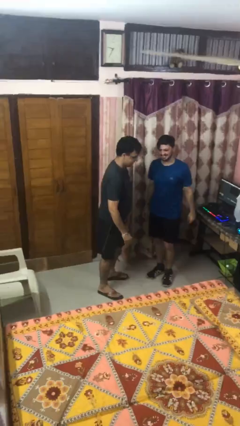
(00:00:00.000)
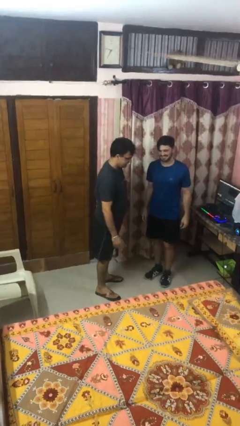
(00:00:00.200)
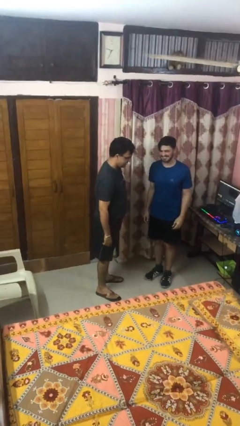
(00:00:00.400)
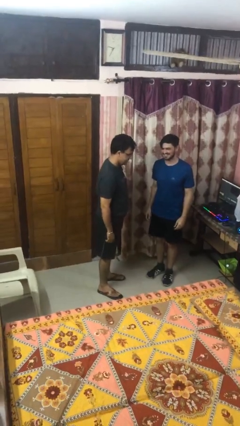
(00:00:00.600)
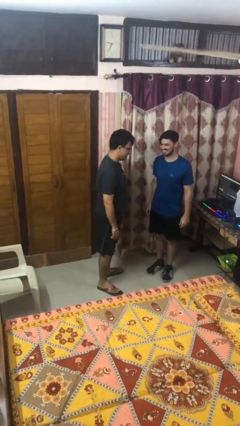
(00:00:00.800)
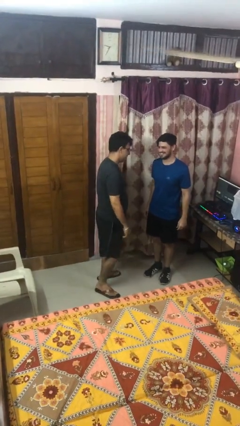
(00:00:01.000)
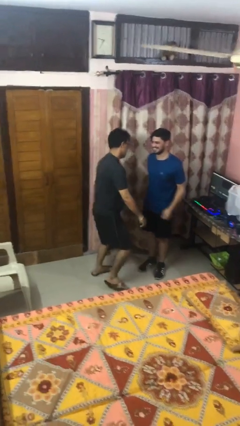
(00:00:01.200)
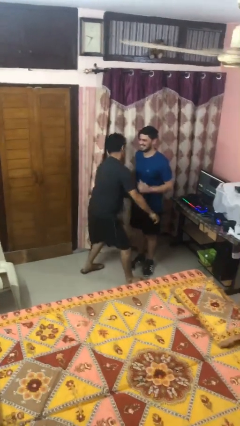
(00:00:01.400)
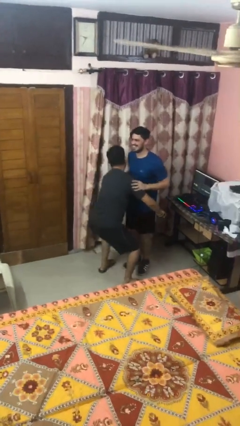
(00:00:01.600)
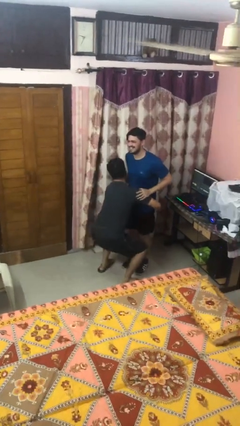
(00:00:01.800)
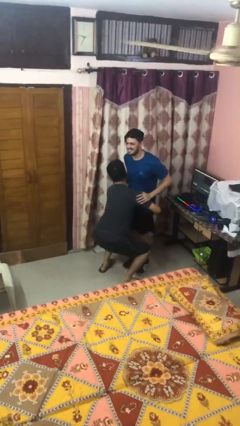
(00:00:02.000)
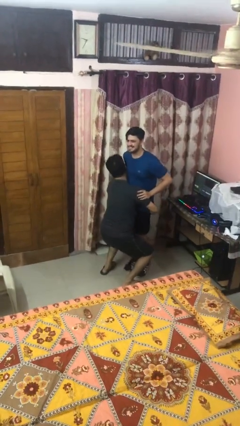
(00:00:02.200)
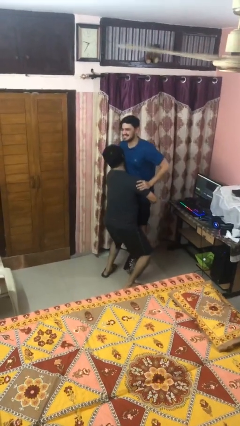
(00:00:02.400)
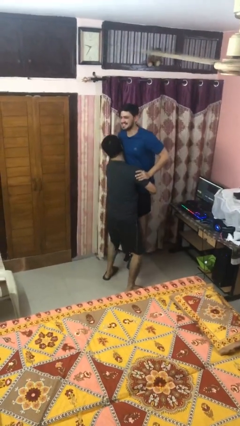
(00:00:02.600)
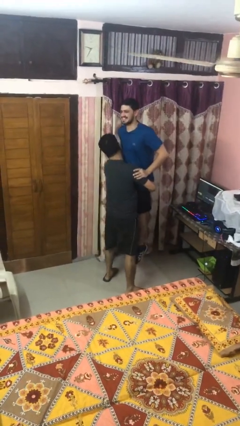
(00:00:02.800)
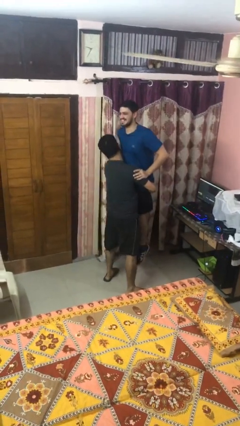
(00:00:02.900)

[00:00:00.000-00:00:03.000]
person picks up person

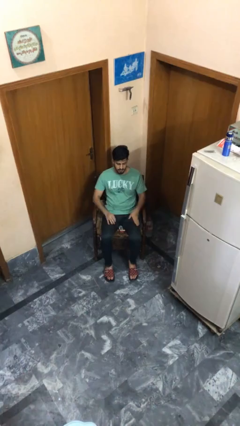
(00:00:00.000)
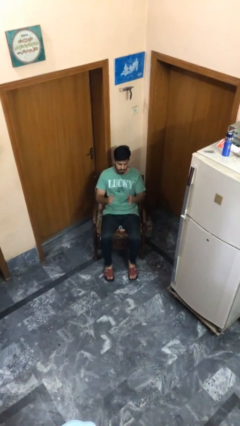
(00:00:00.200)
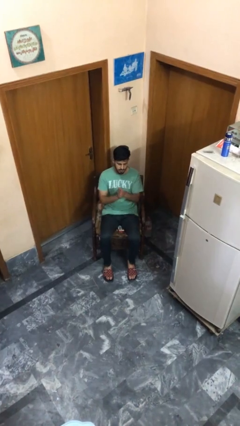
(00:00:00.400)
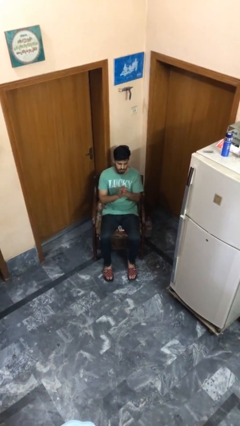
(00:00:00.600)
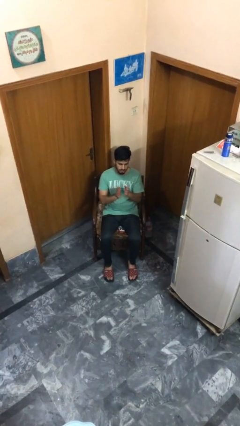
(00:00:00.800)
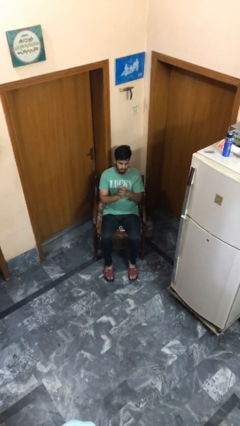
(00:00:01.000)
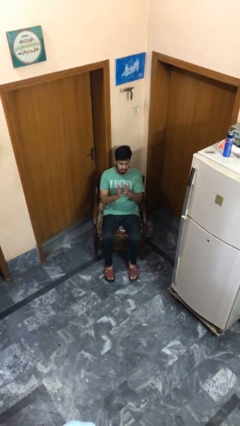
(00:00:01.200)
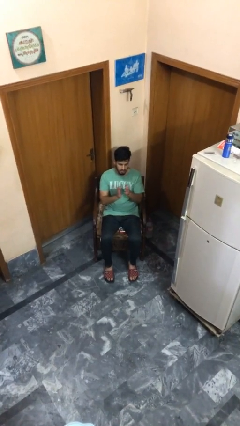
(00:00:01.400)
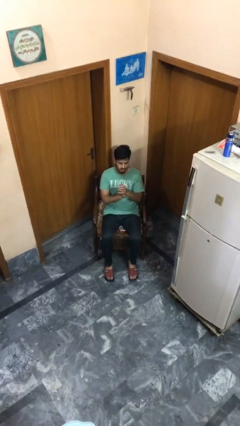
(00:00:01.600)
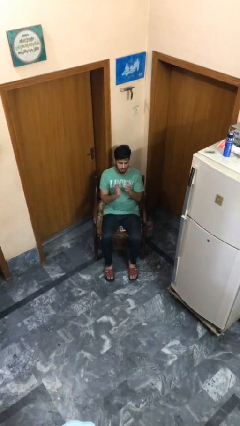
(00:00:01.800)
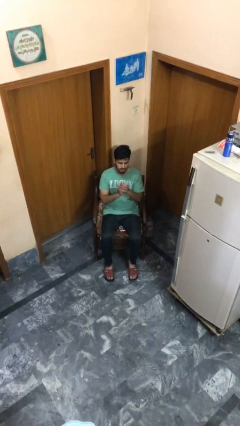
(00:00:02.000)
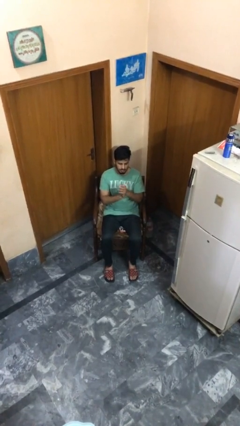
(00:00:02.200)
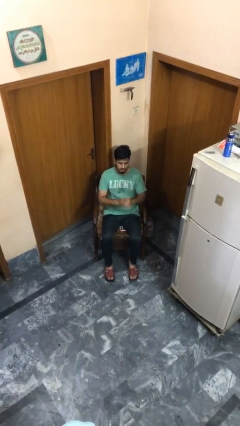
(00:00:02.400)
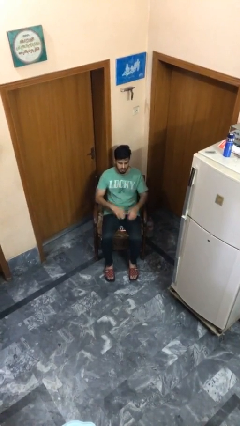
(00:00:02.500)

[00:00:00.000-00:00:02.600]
person claps hands

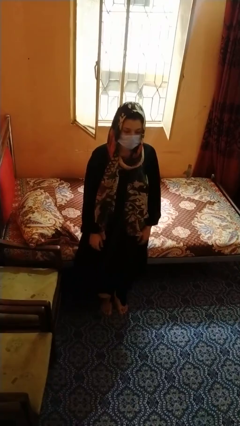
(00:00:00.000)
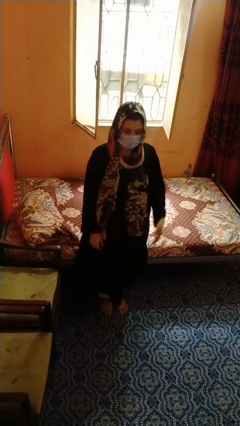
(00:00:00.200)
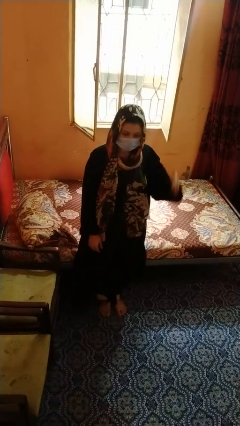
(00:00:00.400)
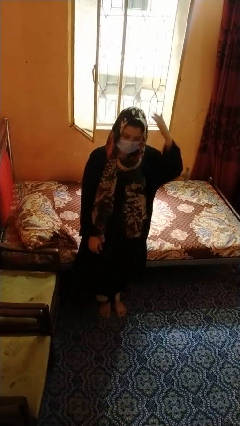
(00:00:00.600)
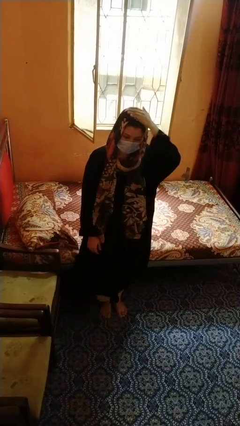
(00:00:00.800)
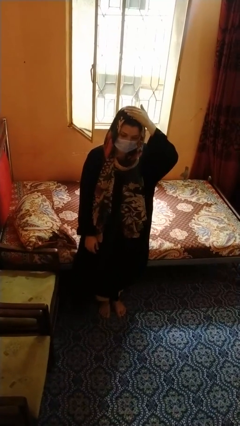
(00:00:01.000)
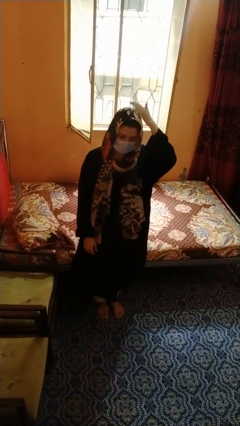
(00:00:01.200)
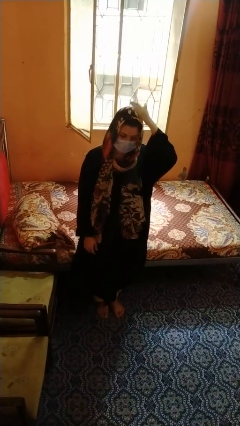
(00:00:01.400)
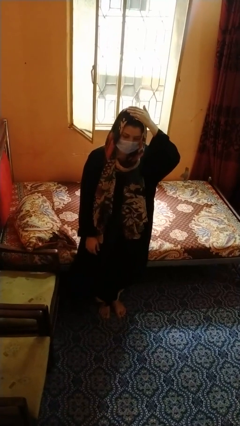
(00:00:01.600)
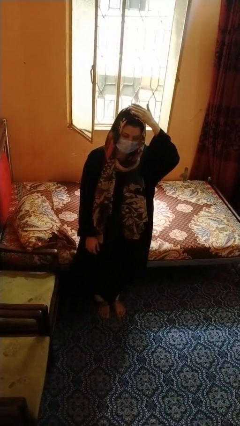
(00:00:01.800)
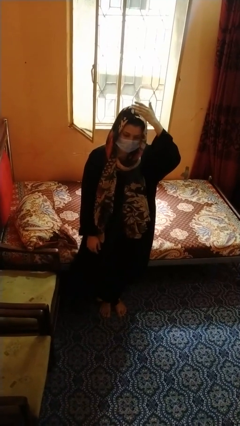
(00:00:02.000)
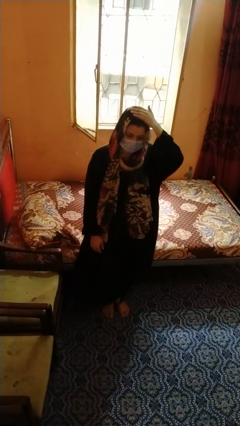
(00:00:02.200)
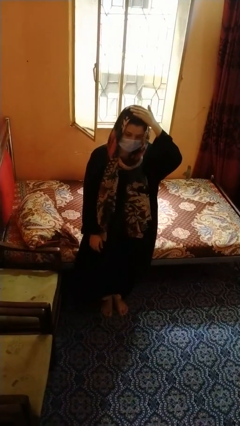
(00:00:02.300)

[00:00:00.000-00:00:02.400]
person pats head

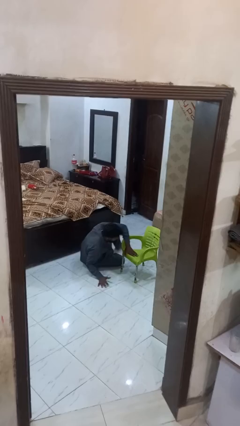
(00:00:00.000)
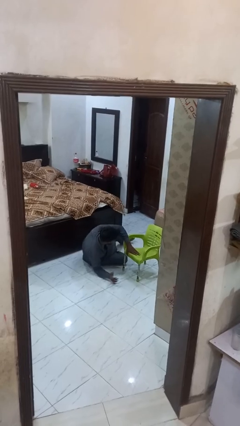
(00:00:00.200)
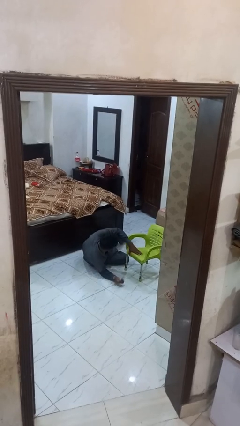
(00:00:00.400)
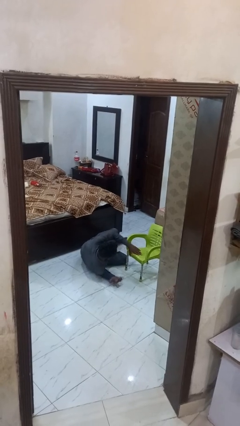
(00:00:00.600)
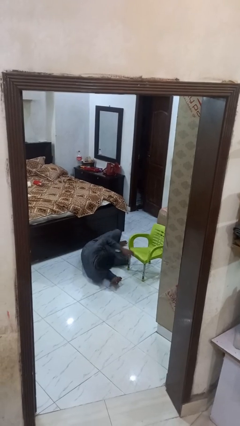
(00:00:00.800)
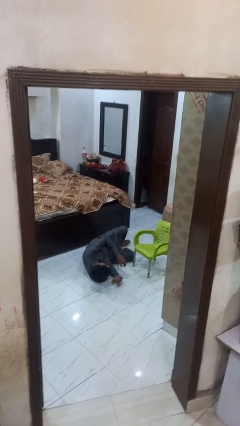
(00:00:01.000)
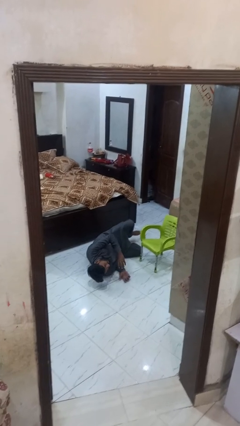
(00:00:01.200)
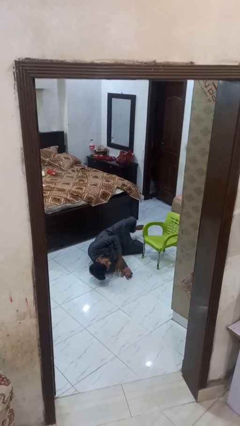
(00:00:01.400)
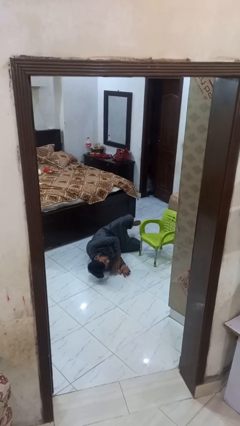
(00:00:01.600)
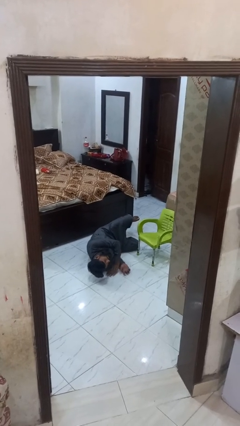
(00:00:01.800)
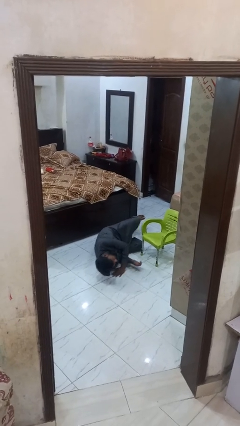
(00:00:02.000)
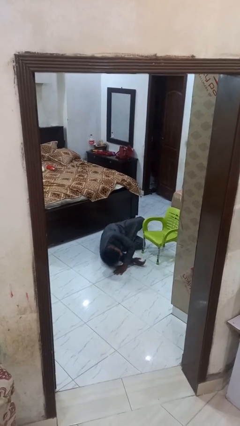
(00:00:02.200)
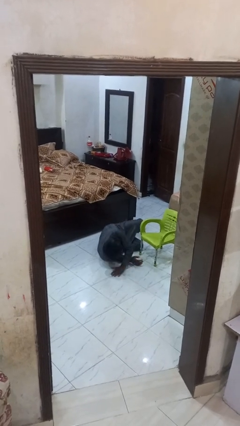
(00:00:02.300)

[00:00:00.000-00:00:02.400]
person lies down on floor

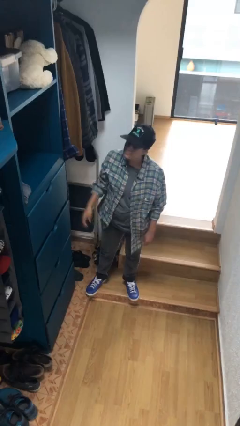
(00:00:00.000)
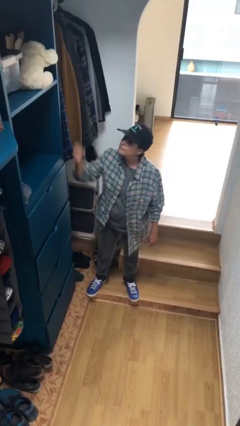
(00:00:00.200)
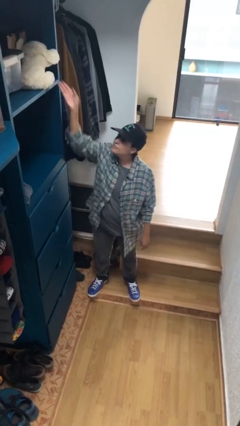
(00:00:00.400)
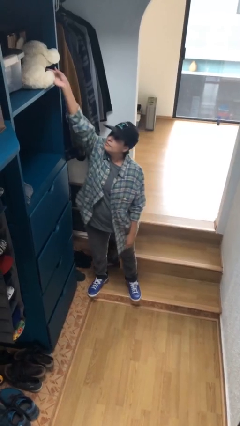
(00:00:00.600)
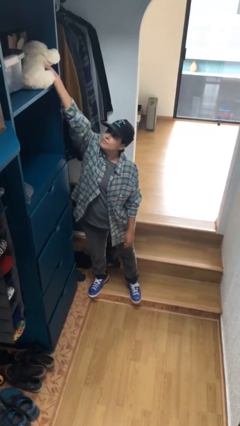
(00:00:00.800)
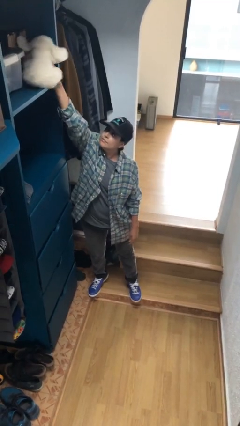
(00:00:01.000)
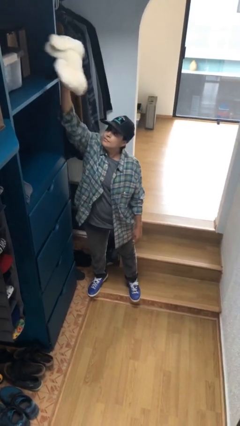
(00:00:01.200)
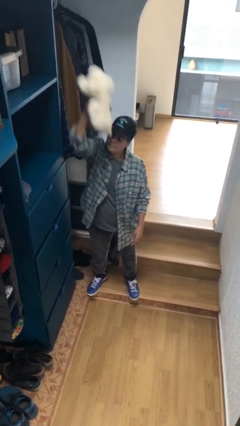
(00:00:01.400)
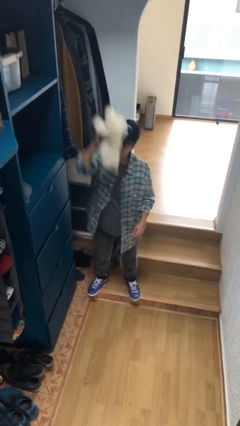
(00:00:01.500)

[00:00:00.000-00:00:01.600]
person picks up object from shelf

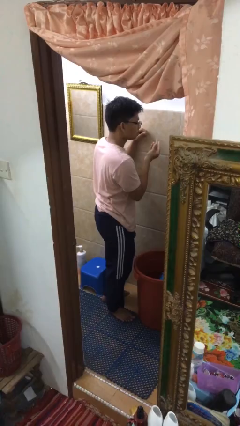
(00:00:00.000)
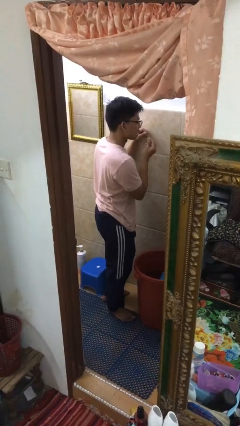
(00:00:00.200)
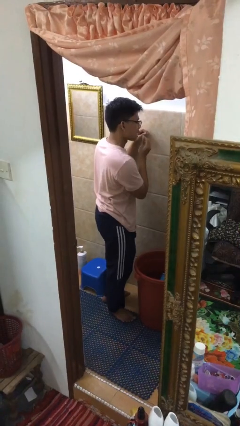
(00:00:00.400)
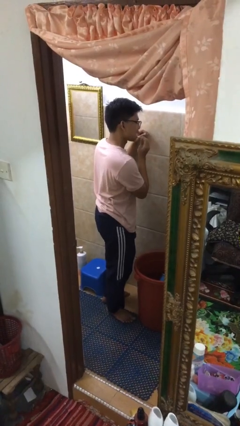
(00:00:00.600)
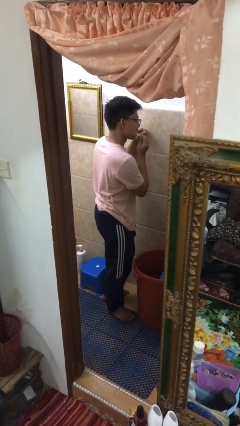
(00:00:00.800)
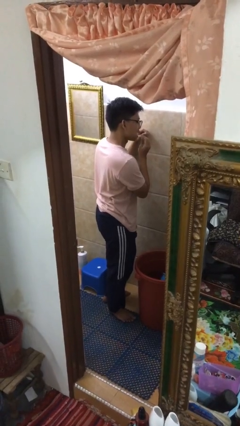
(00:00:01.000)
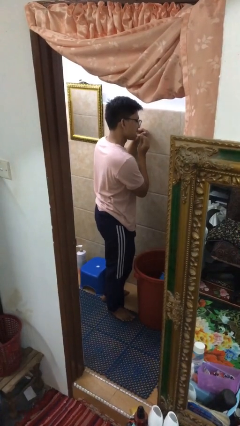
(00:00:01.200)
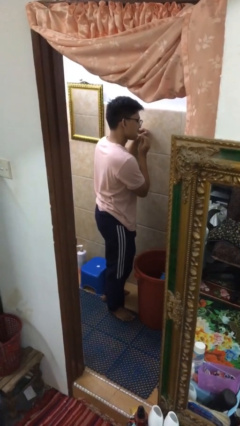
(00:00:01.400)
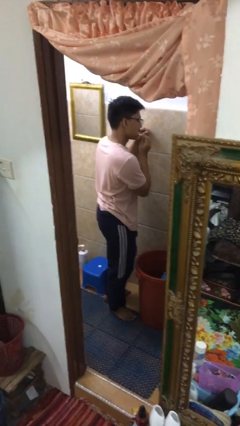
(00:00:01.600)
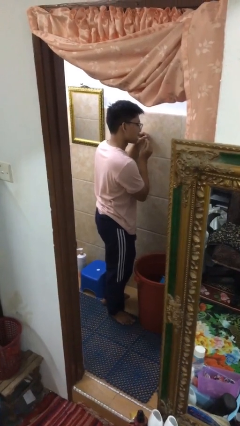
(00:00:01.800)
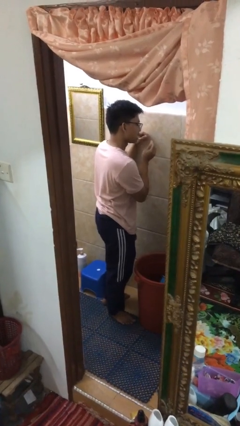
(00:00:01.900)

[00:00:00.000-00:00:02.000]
person flosses

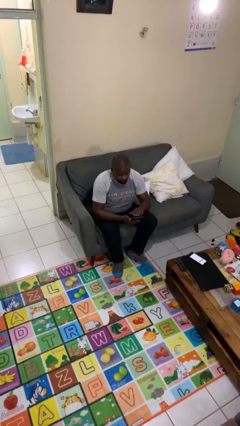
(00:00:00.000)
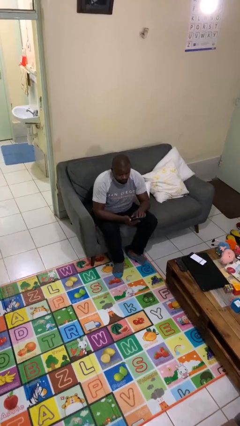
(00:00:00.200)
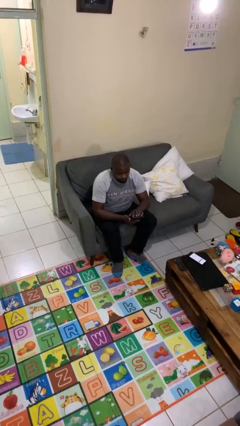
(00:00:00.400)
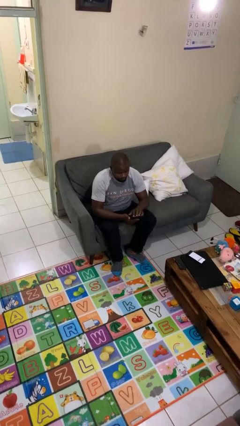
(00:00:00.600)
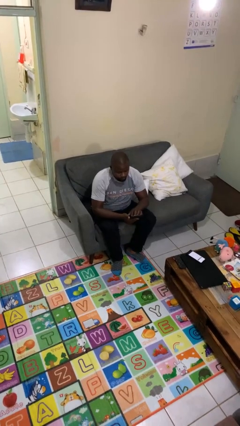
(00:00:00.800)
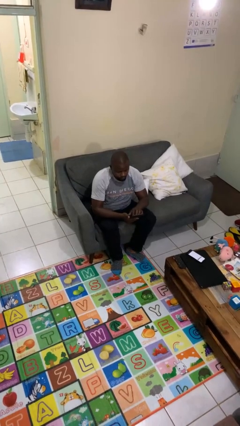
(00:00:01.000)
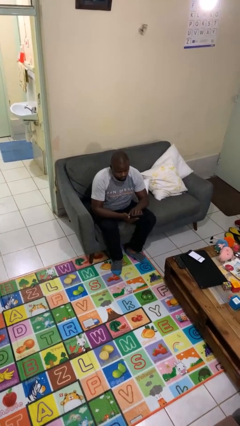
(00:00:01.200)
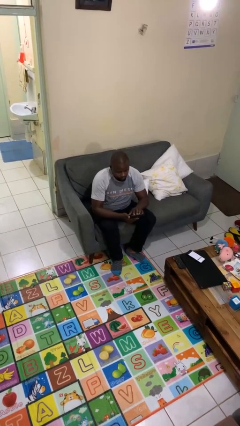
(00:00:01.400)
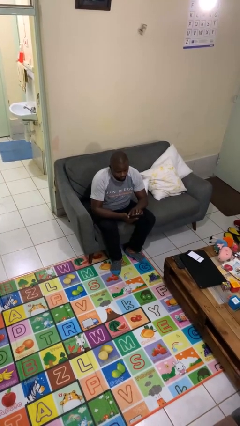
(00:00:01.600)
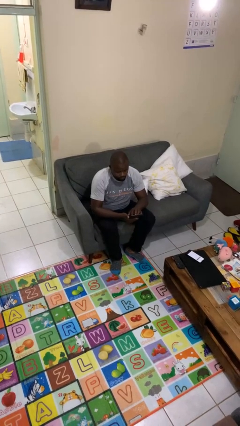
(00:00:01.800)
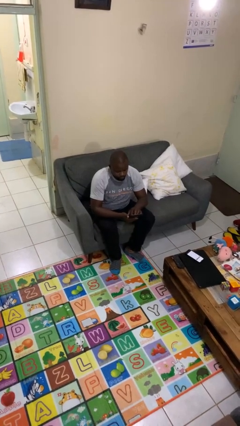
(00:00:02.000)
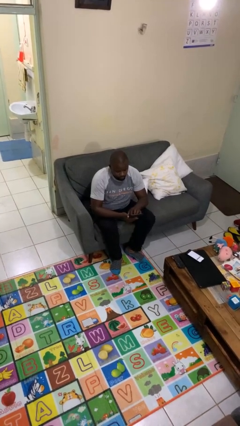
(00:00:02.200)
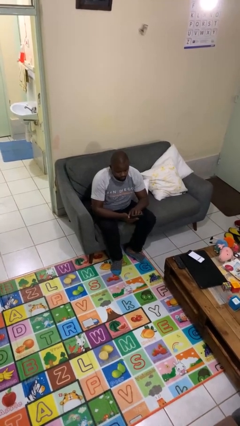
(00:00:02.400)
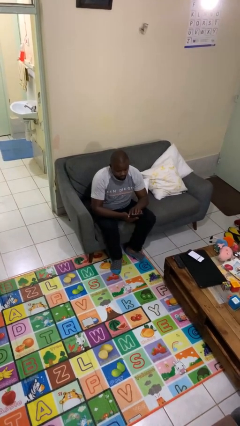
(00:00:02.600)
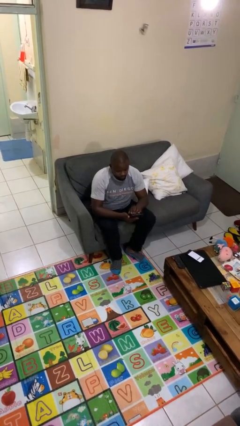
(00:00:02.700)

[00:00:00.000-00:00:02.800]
person interacts with tablet
